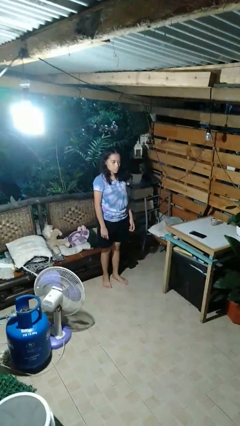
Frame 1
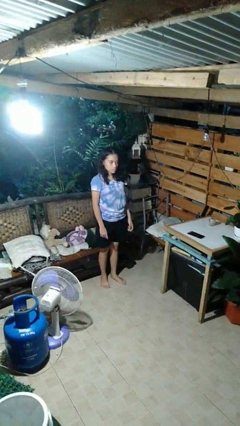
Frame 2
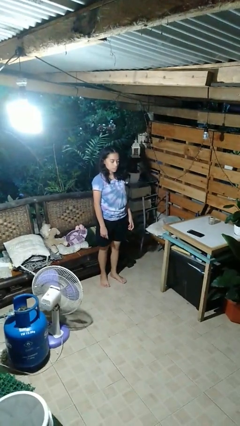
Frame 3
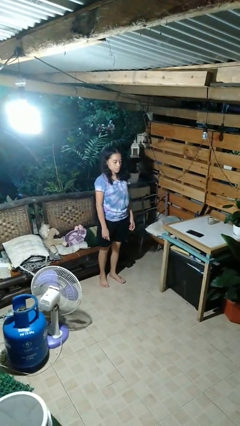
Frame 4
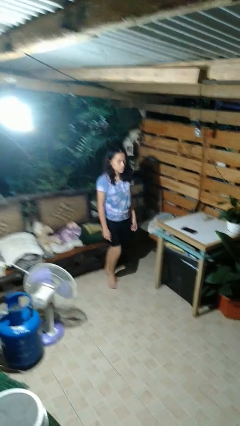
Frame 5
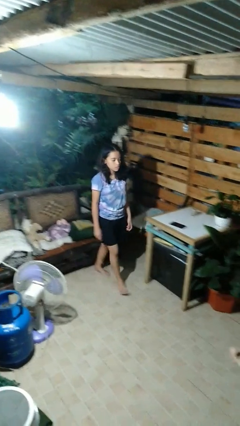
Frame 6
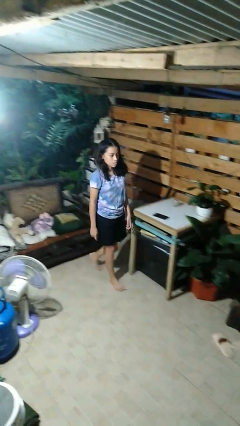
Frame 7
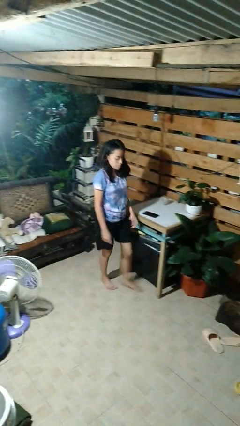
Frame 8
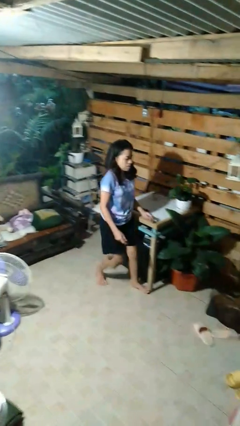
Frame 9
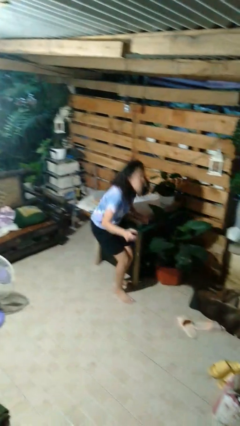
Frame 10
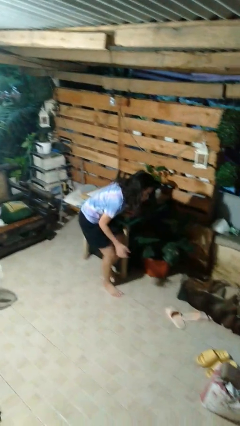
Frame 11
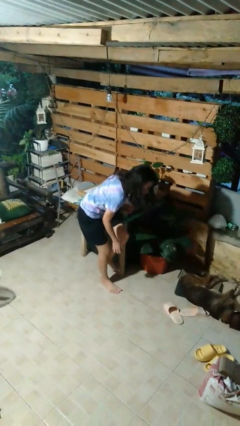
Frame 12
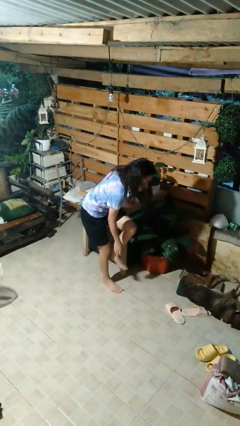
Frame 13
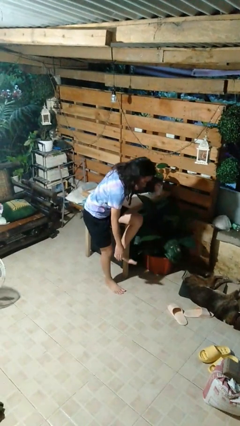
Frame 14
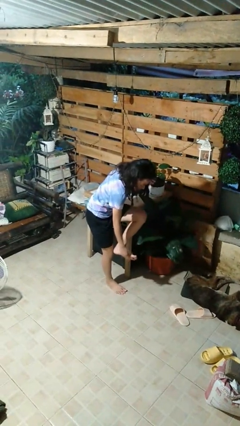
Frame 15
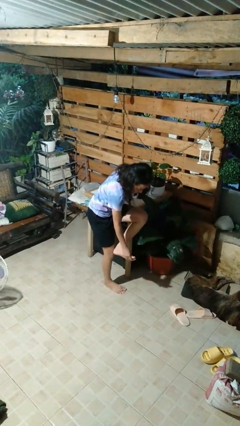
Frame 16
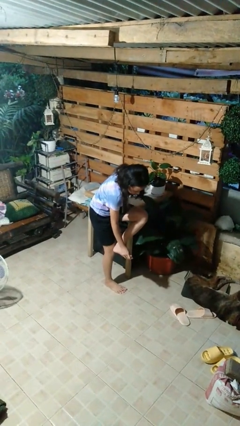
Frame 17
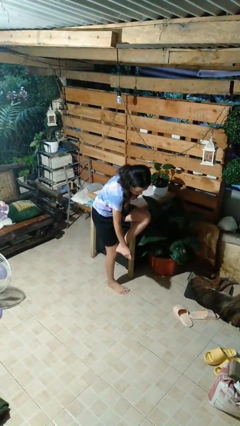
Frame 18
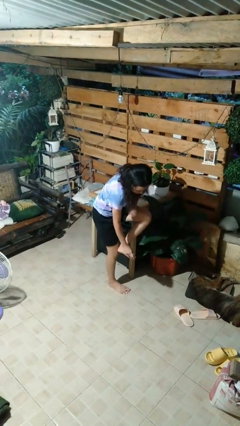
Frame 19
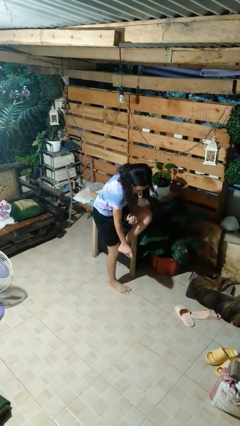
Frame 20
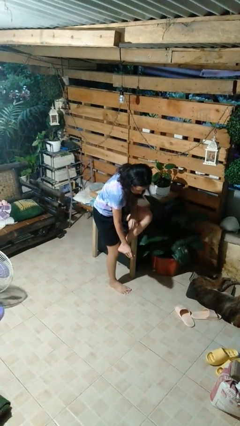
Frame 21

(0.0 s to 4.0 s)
person stubs toe

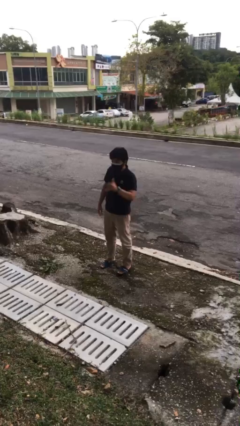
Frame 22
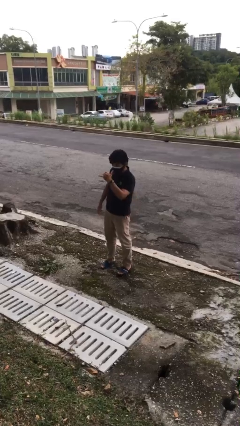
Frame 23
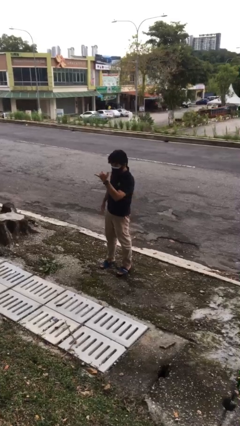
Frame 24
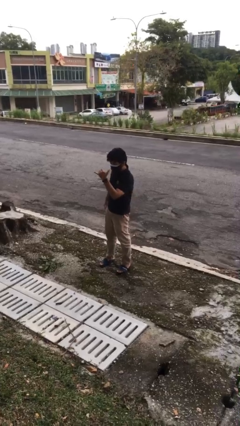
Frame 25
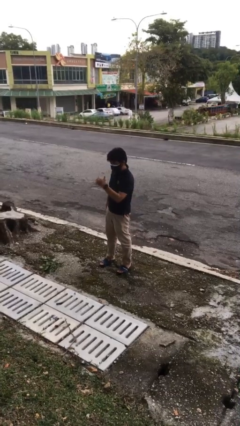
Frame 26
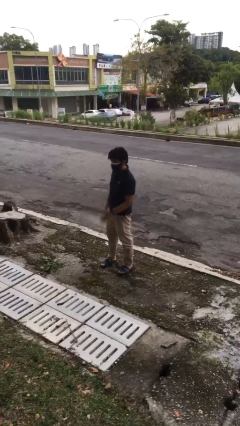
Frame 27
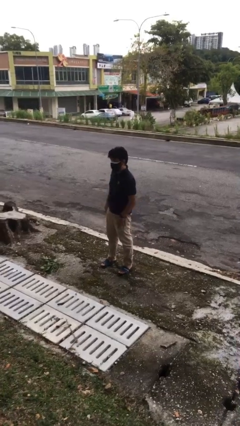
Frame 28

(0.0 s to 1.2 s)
person gestures hang loose

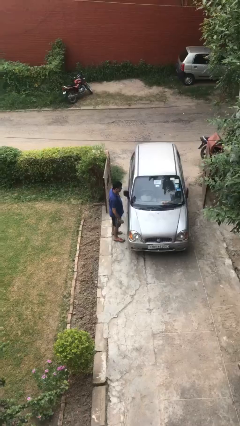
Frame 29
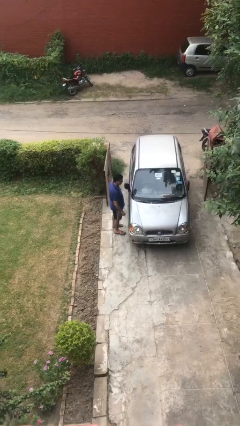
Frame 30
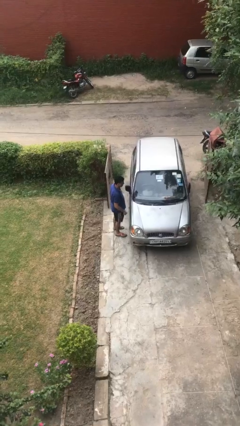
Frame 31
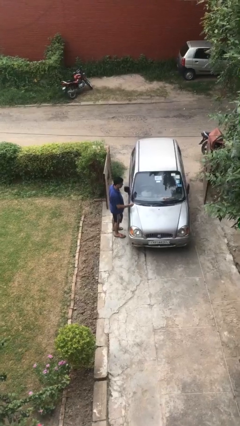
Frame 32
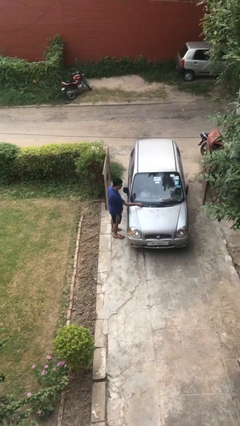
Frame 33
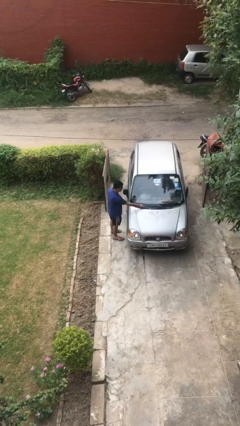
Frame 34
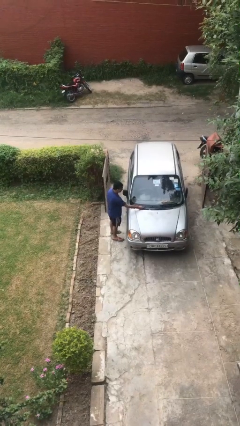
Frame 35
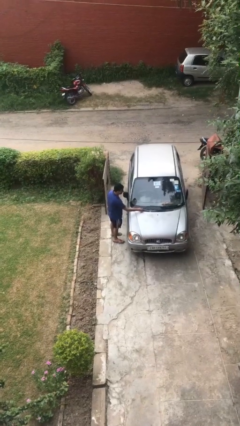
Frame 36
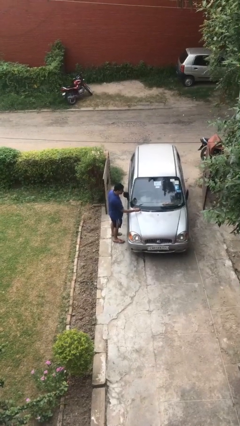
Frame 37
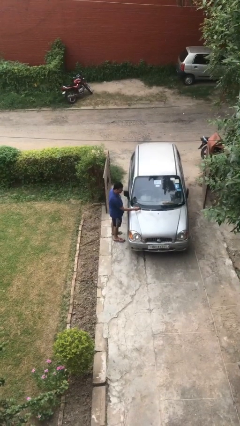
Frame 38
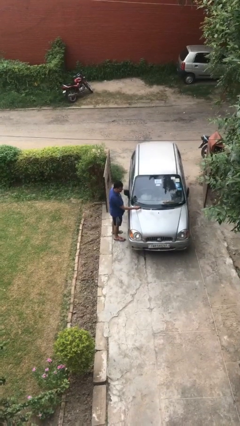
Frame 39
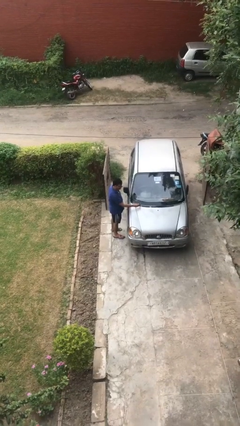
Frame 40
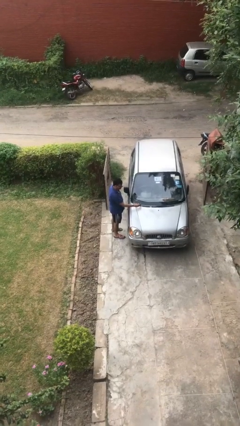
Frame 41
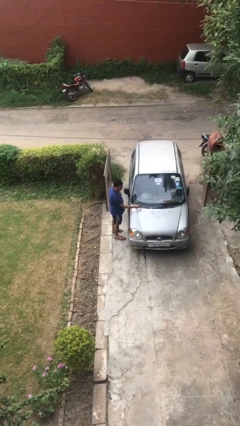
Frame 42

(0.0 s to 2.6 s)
person flips up car wipers

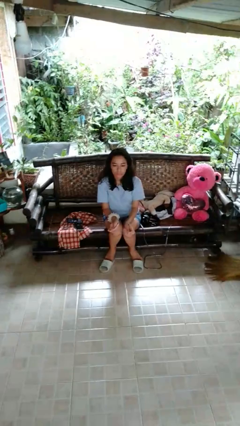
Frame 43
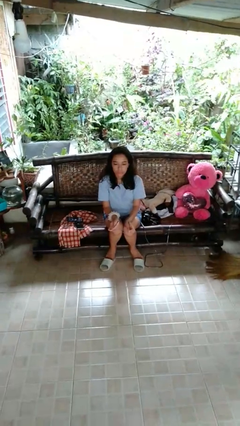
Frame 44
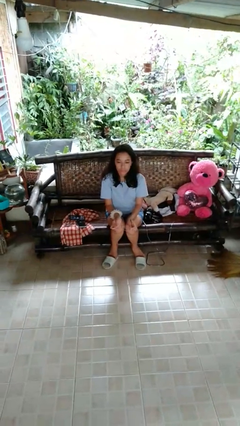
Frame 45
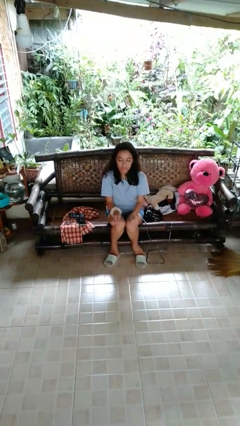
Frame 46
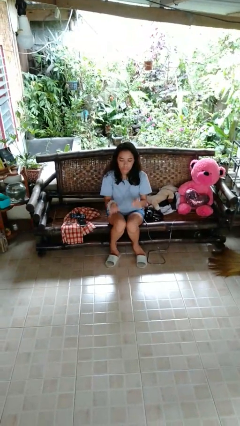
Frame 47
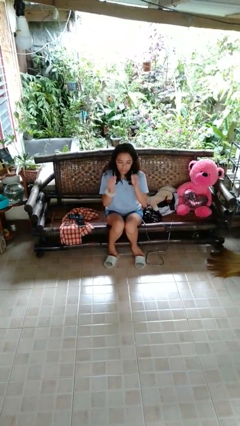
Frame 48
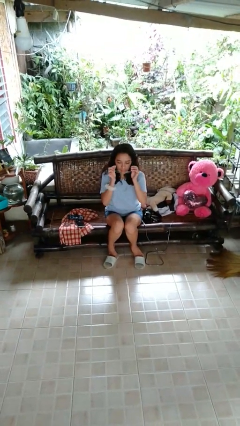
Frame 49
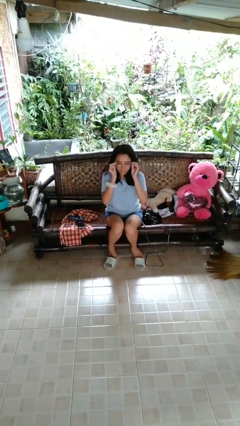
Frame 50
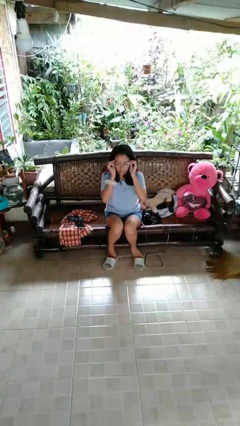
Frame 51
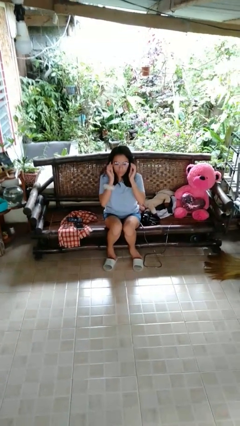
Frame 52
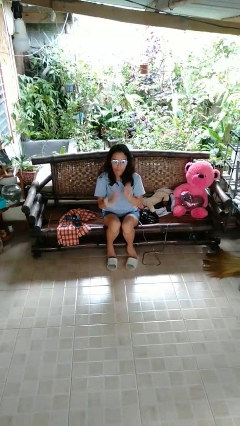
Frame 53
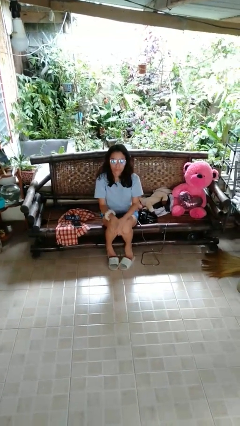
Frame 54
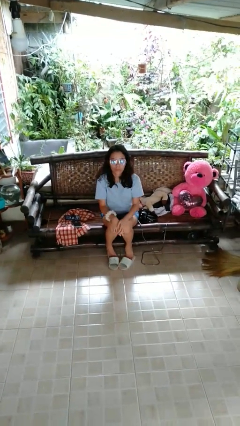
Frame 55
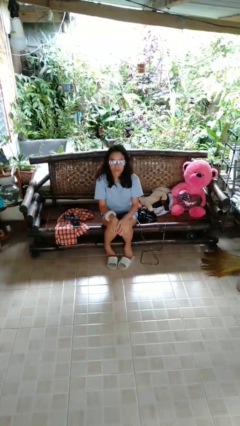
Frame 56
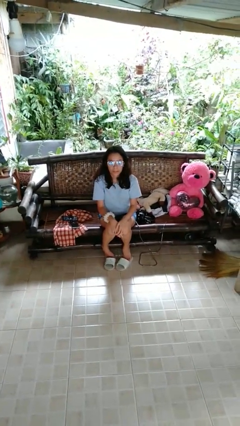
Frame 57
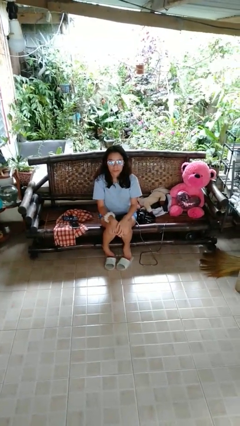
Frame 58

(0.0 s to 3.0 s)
person grabs person by forearm

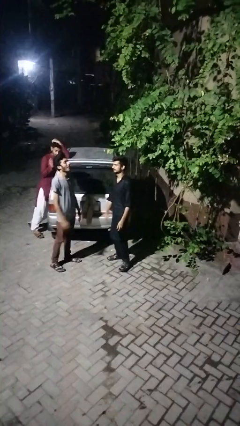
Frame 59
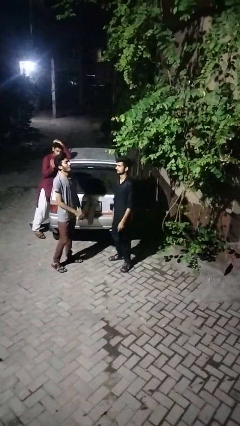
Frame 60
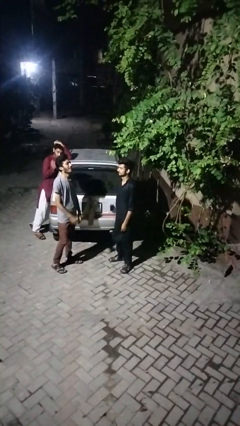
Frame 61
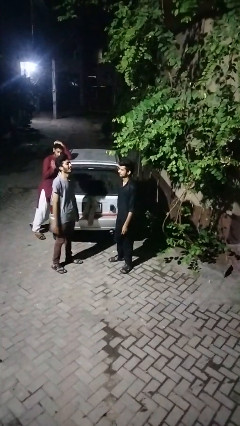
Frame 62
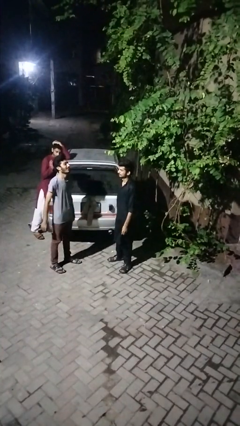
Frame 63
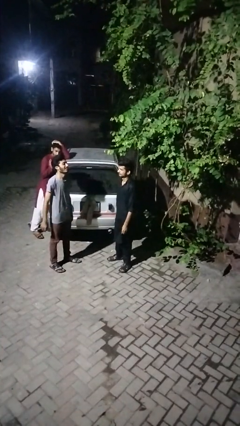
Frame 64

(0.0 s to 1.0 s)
person laughs with person

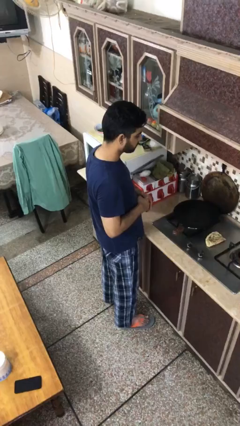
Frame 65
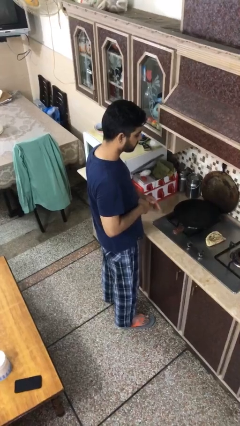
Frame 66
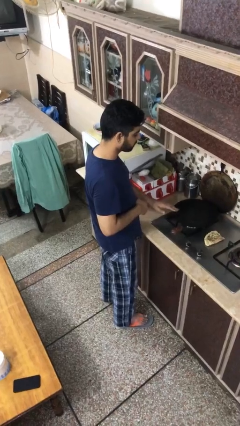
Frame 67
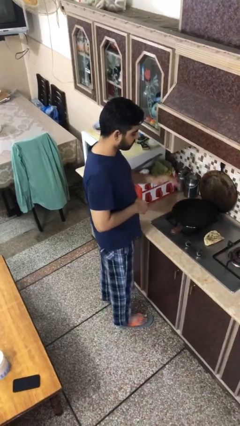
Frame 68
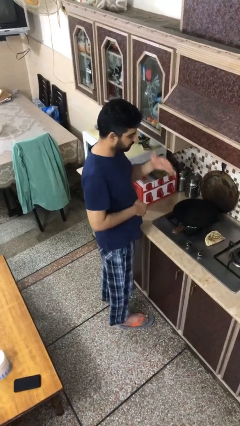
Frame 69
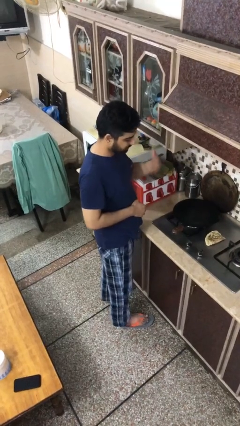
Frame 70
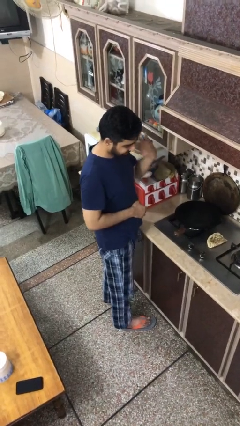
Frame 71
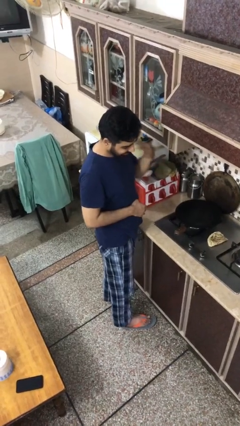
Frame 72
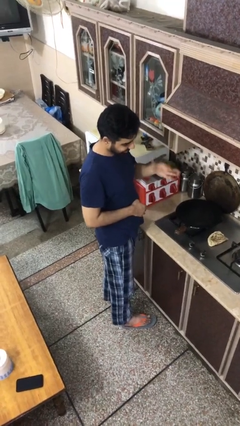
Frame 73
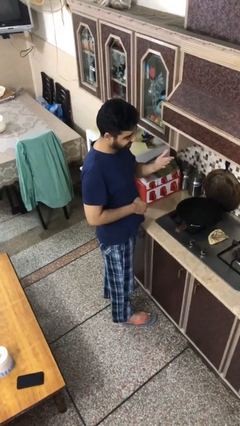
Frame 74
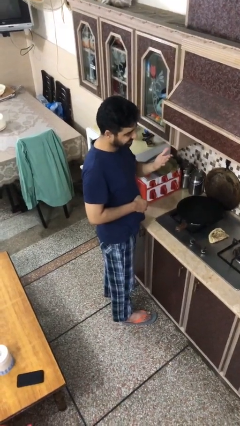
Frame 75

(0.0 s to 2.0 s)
person burns hand

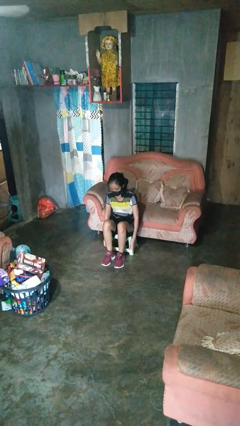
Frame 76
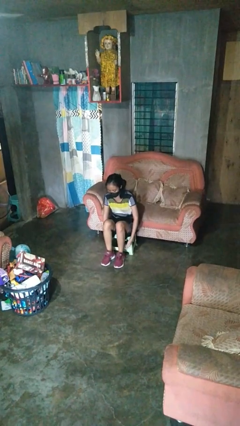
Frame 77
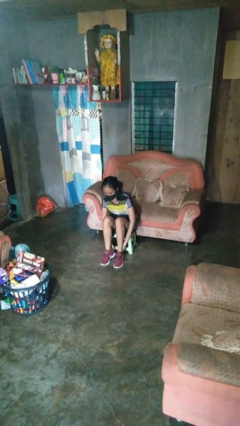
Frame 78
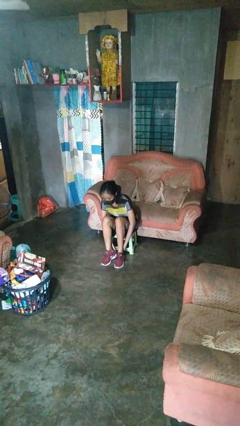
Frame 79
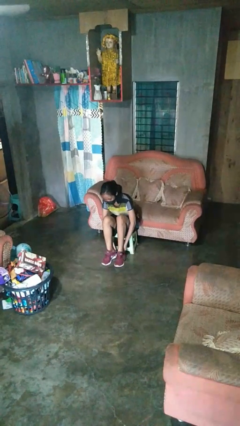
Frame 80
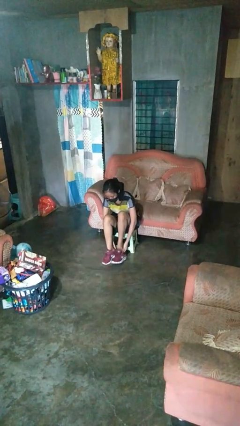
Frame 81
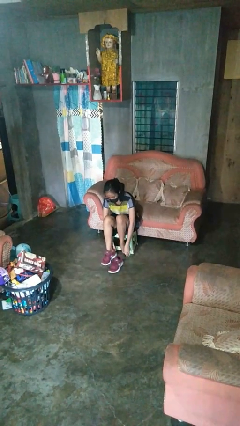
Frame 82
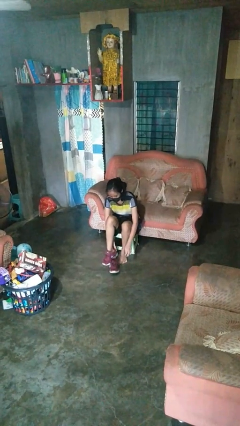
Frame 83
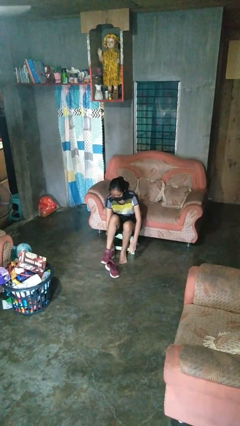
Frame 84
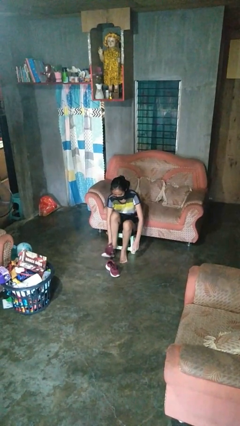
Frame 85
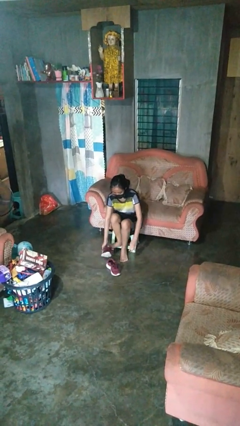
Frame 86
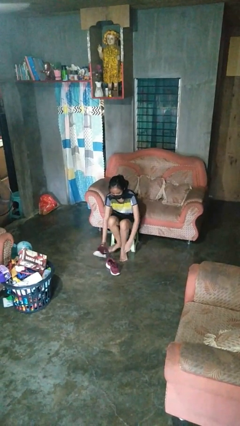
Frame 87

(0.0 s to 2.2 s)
person takes off shoes

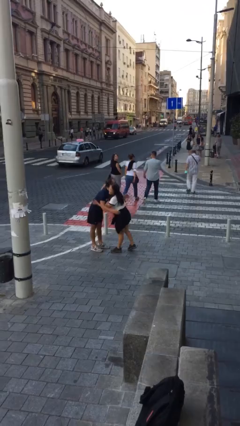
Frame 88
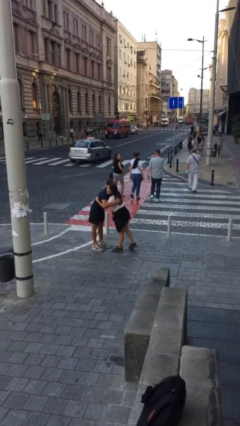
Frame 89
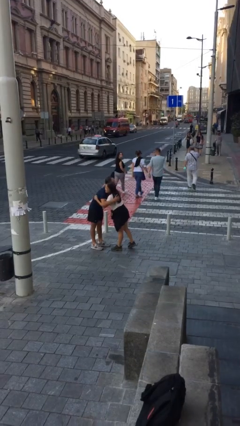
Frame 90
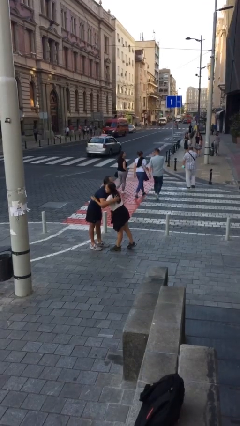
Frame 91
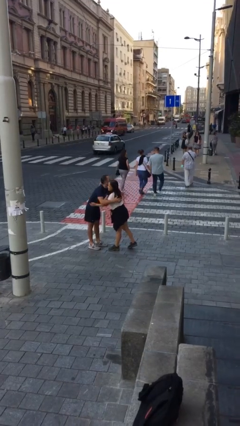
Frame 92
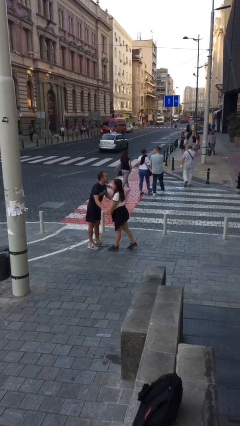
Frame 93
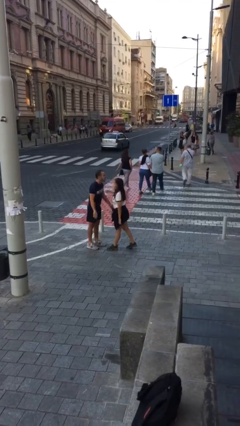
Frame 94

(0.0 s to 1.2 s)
person embraces person
